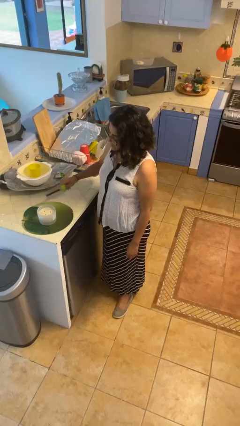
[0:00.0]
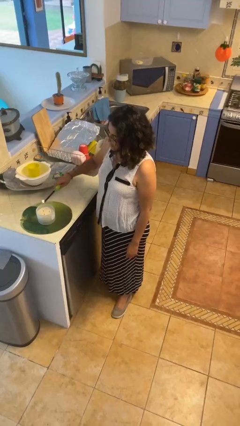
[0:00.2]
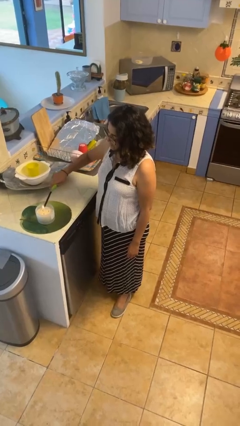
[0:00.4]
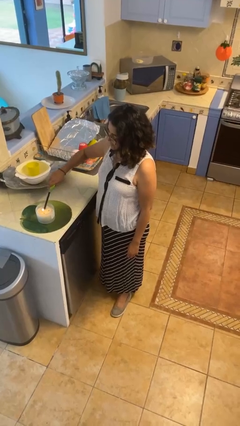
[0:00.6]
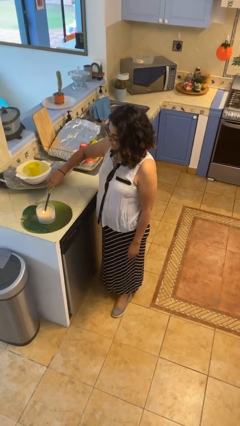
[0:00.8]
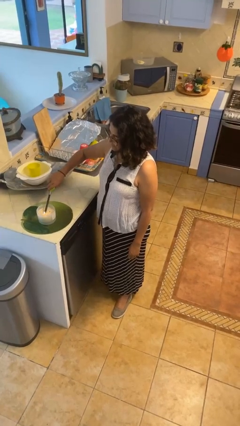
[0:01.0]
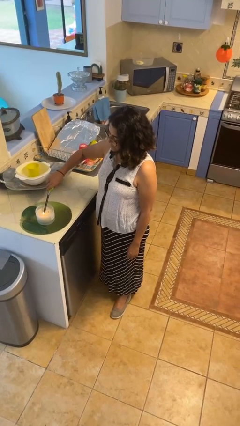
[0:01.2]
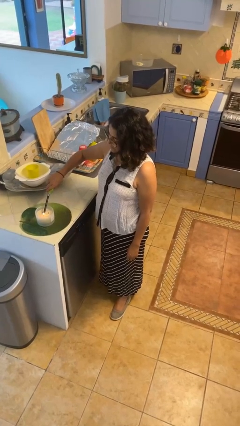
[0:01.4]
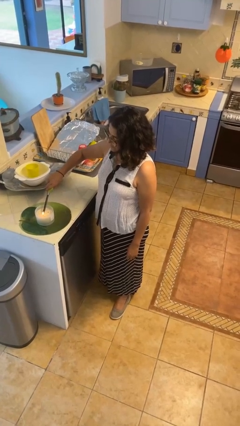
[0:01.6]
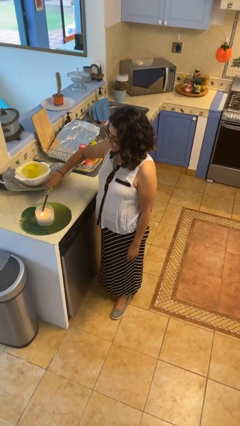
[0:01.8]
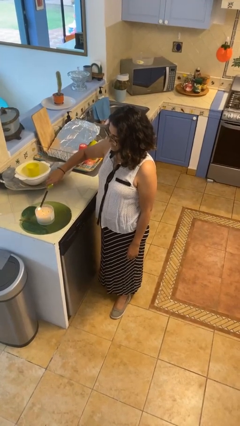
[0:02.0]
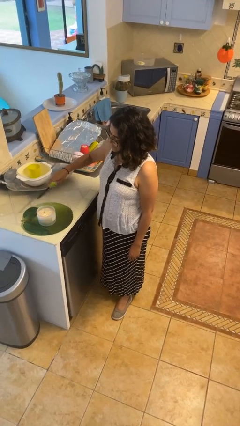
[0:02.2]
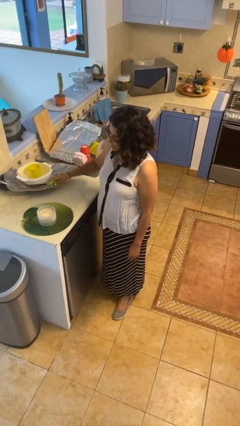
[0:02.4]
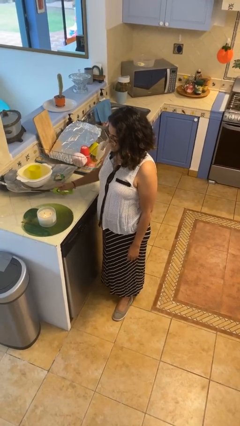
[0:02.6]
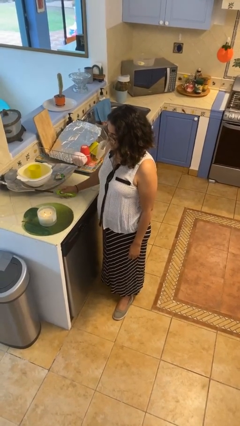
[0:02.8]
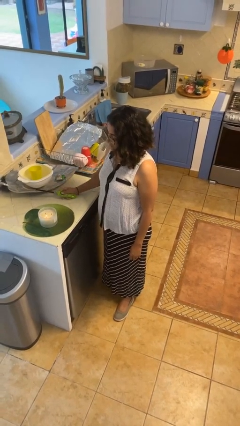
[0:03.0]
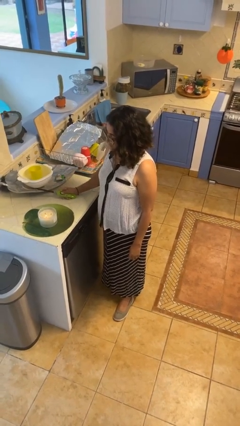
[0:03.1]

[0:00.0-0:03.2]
person lights candle

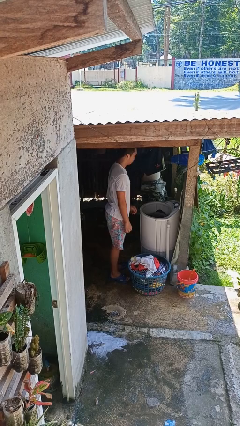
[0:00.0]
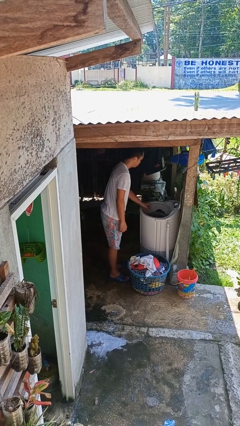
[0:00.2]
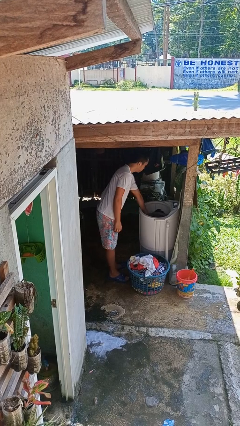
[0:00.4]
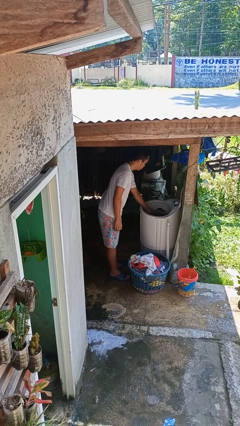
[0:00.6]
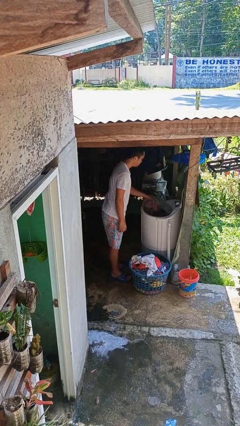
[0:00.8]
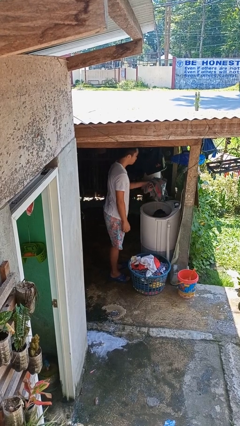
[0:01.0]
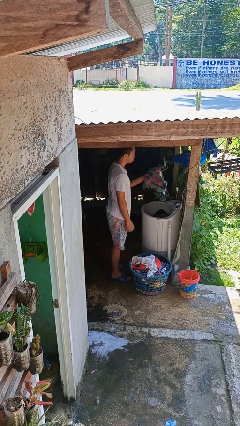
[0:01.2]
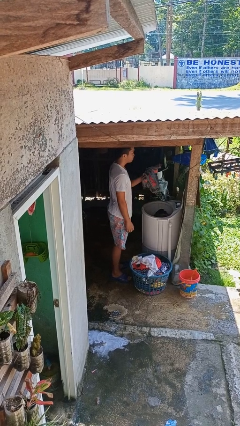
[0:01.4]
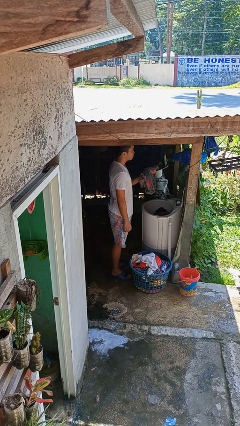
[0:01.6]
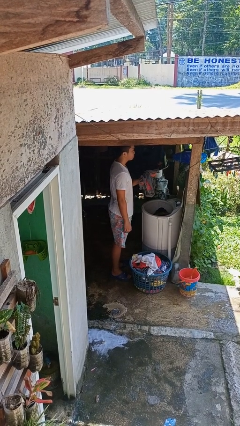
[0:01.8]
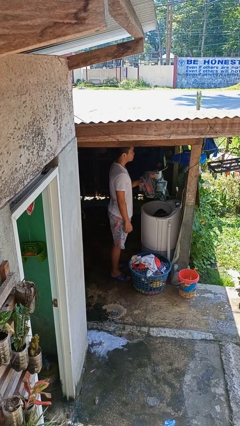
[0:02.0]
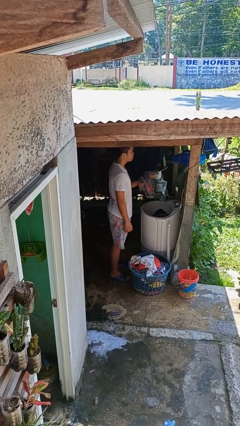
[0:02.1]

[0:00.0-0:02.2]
person unloads clotheswasher

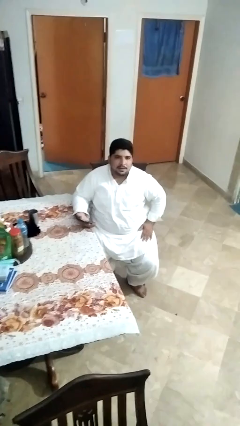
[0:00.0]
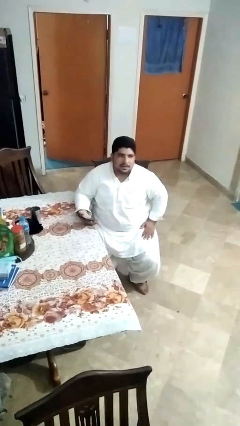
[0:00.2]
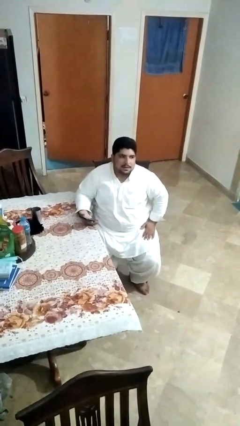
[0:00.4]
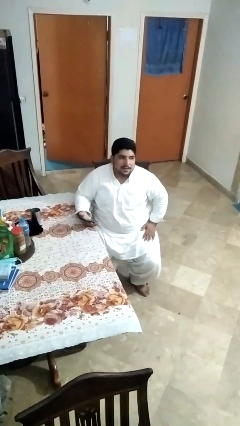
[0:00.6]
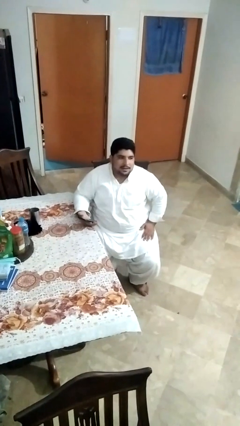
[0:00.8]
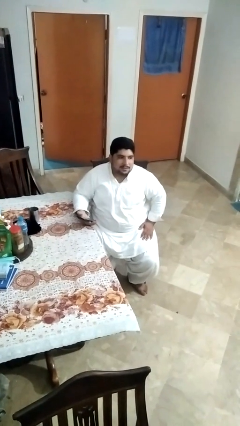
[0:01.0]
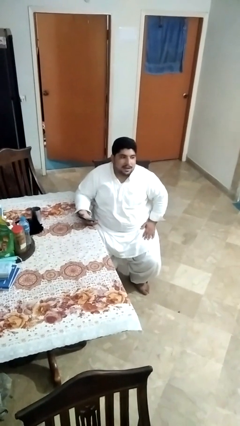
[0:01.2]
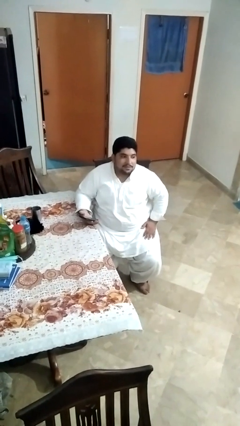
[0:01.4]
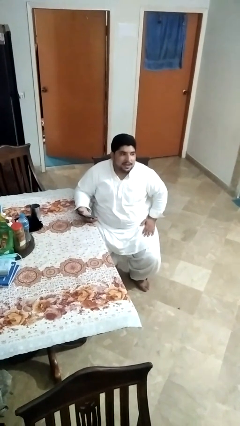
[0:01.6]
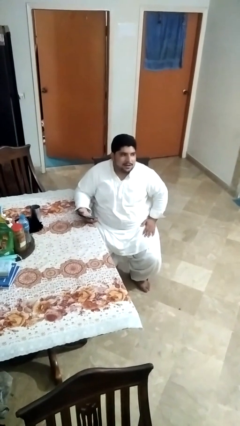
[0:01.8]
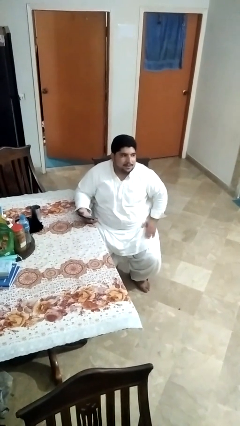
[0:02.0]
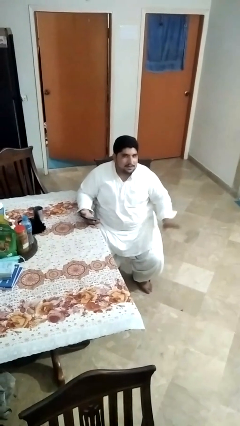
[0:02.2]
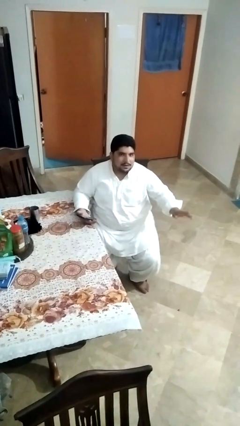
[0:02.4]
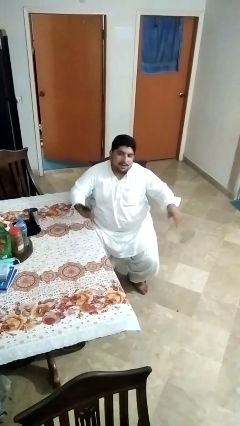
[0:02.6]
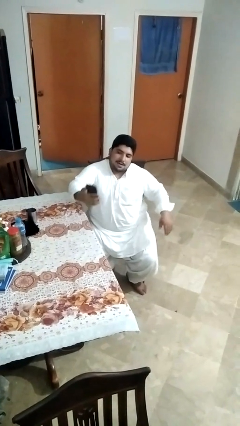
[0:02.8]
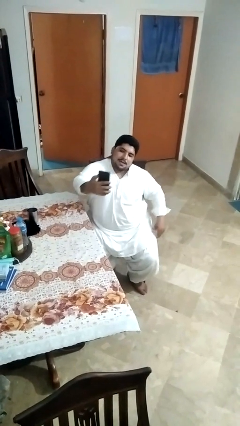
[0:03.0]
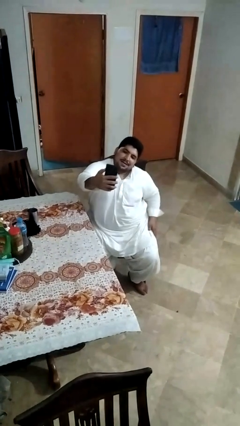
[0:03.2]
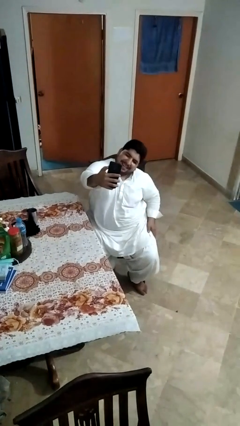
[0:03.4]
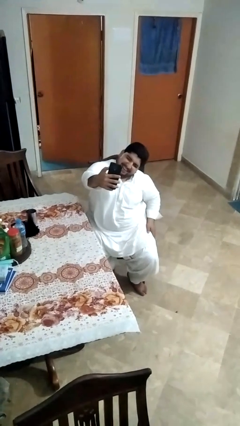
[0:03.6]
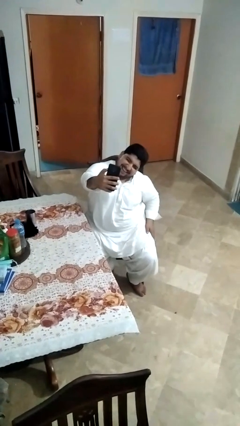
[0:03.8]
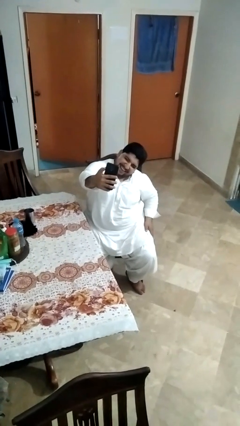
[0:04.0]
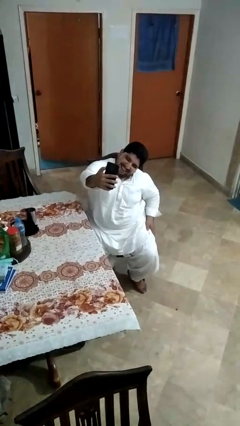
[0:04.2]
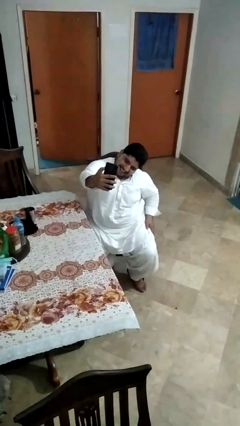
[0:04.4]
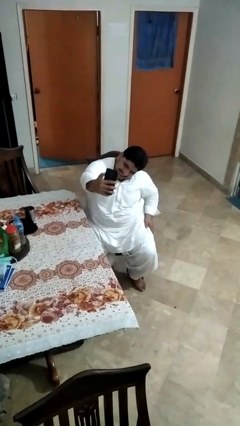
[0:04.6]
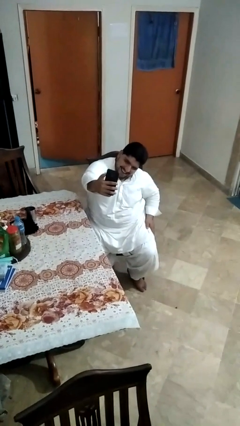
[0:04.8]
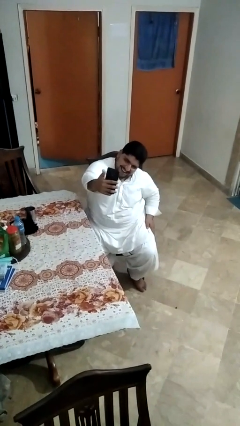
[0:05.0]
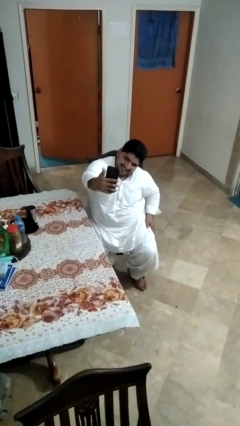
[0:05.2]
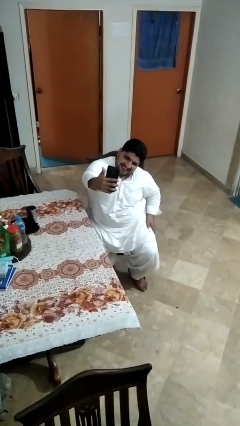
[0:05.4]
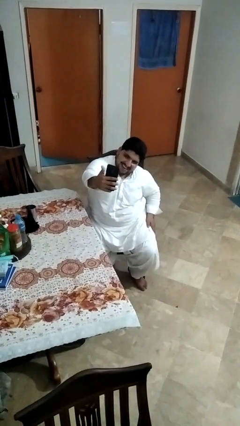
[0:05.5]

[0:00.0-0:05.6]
person takes selfie

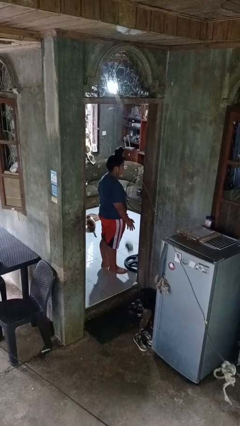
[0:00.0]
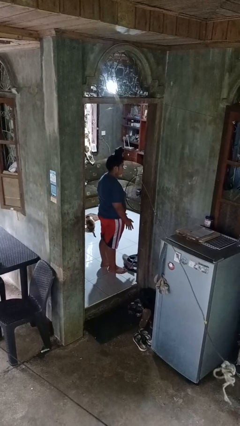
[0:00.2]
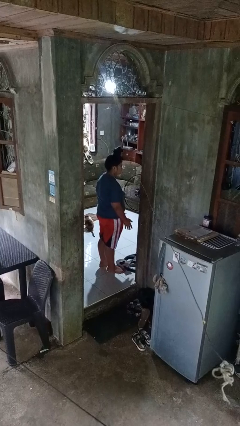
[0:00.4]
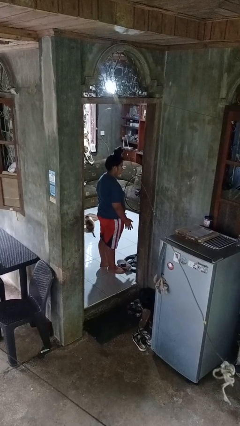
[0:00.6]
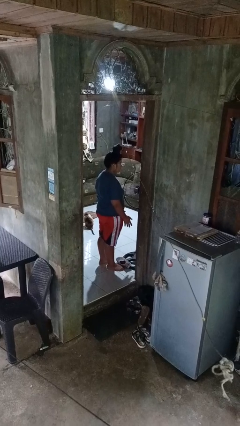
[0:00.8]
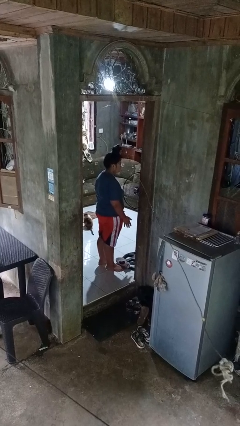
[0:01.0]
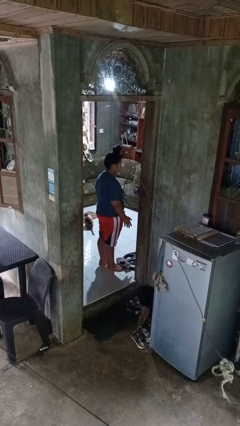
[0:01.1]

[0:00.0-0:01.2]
person drops object

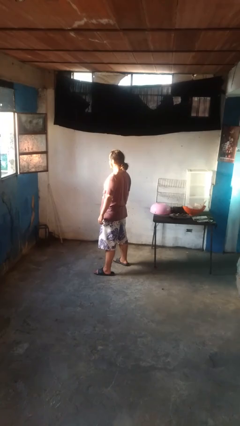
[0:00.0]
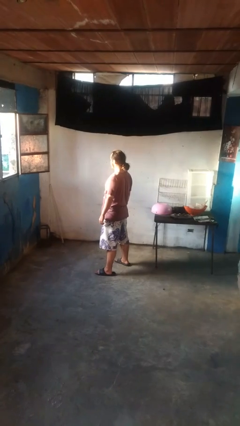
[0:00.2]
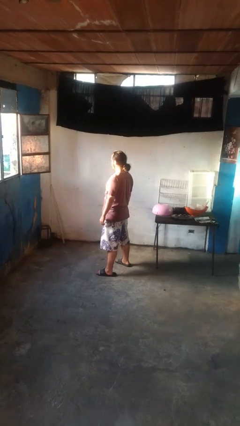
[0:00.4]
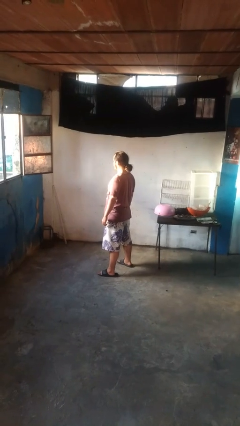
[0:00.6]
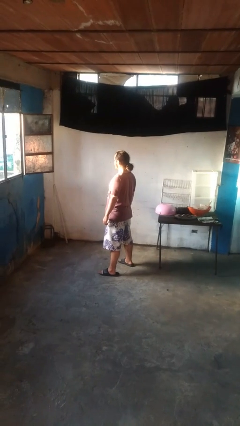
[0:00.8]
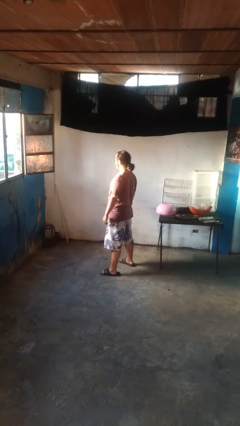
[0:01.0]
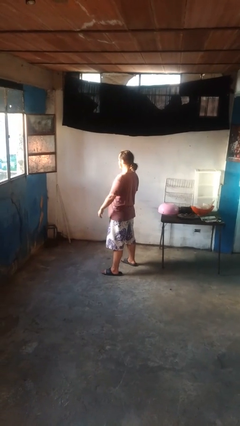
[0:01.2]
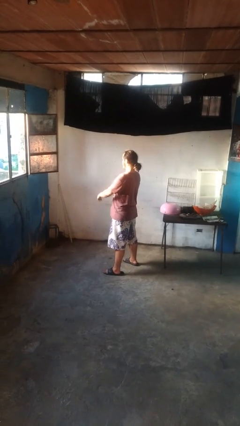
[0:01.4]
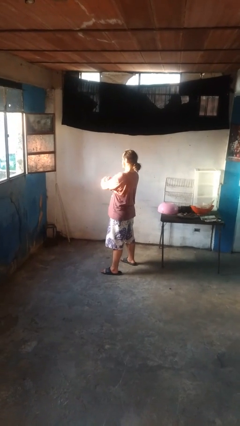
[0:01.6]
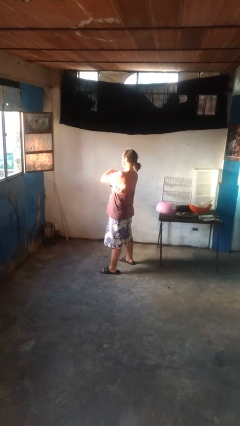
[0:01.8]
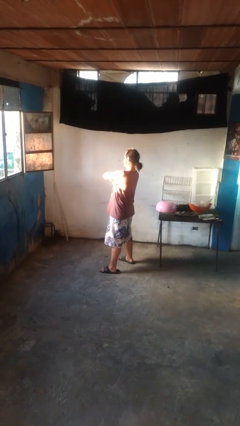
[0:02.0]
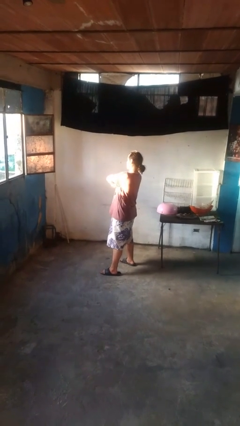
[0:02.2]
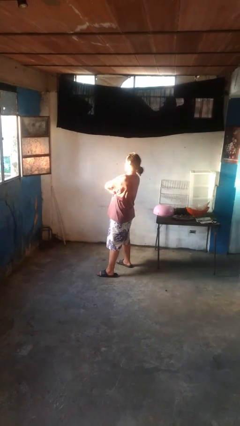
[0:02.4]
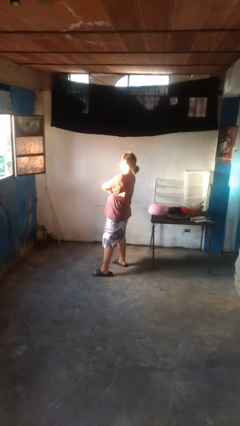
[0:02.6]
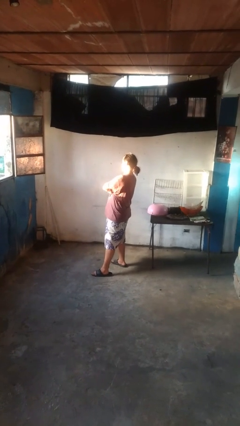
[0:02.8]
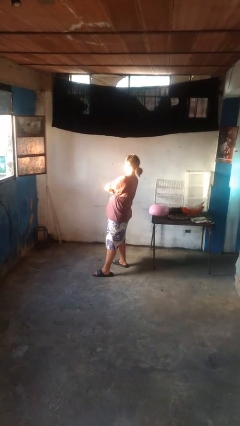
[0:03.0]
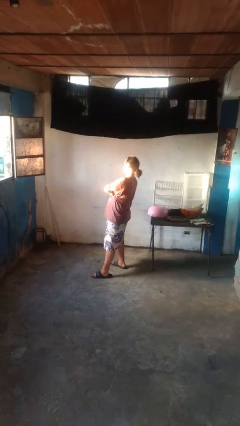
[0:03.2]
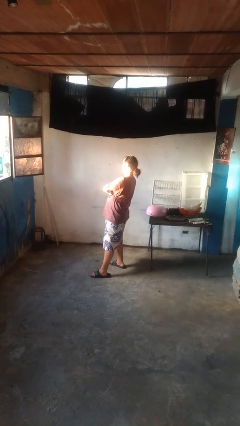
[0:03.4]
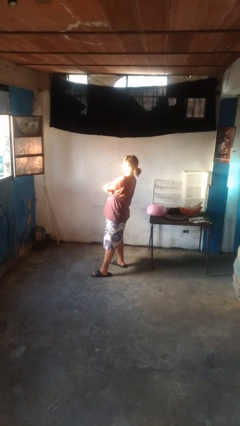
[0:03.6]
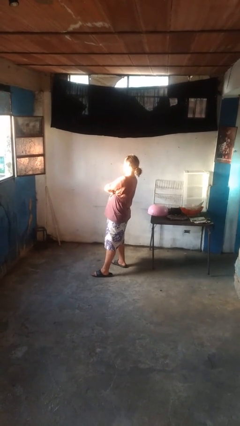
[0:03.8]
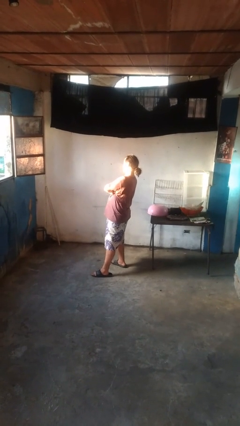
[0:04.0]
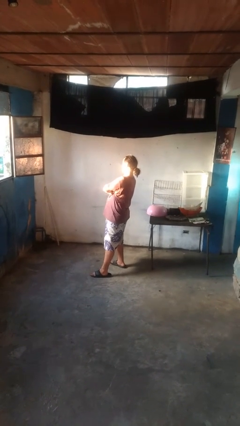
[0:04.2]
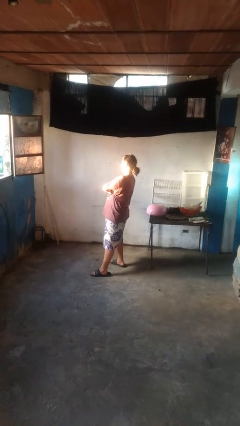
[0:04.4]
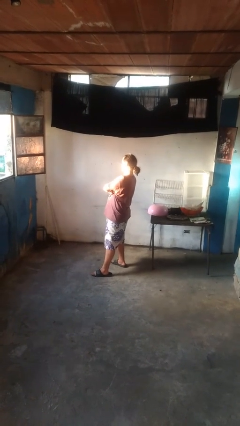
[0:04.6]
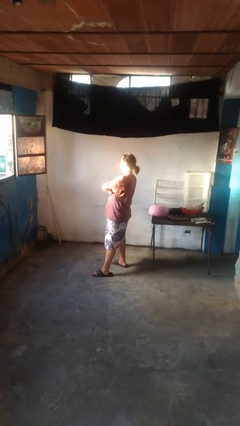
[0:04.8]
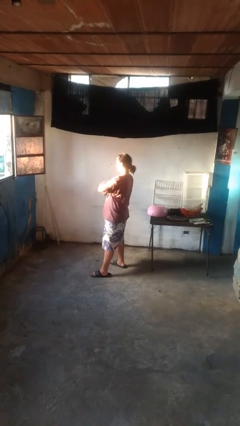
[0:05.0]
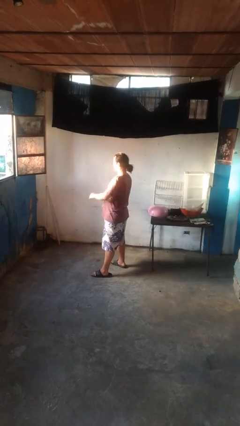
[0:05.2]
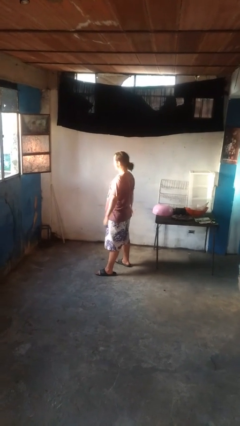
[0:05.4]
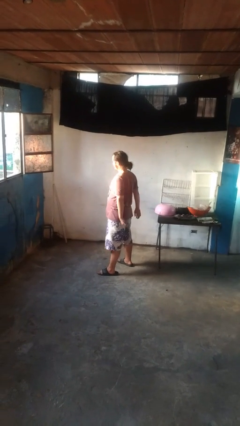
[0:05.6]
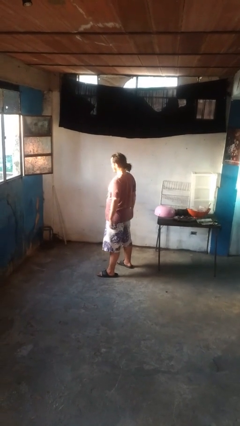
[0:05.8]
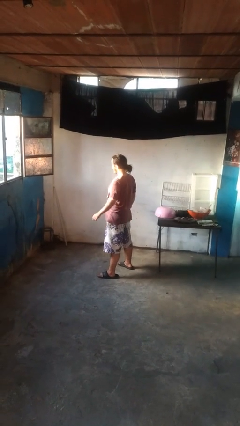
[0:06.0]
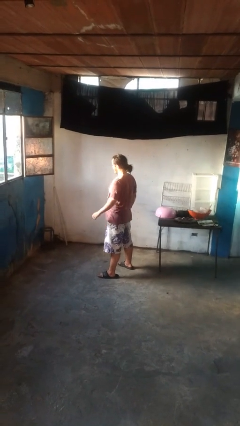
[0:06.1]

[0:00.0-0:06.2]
person gestures arms x
